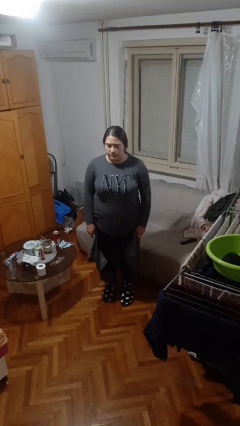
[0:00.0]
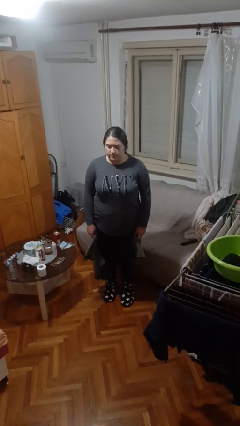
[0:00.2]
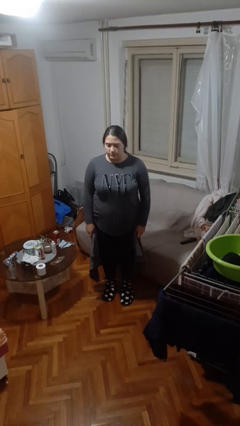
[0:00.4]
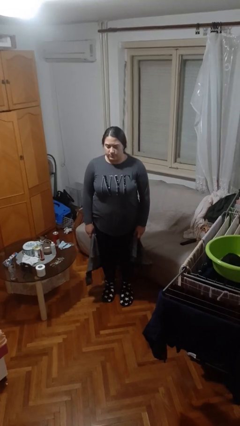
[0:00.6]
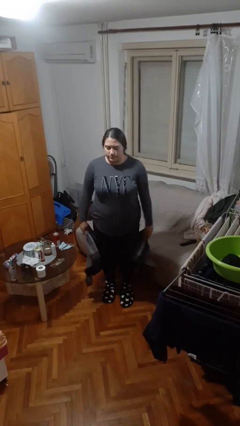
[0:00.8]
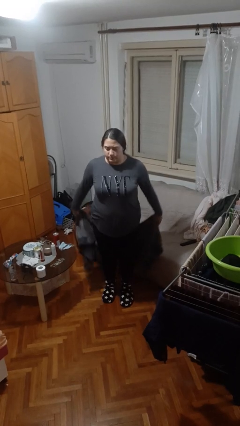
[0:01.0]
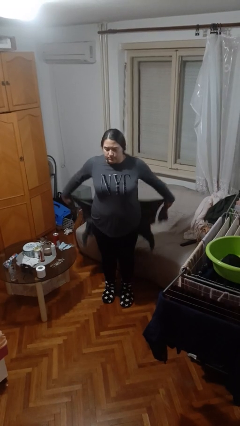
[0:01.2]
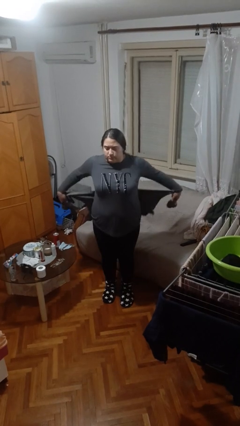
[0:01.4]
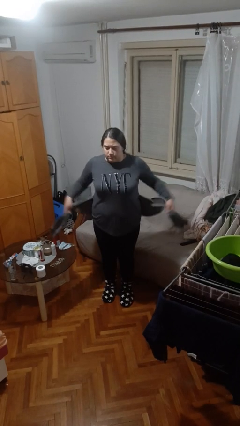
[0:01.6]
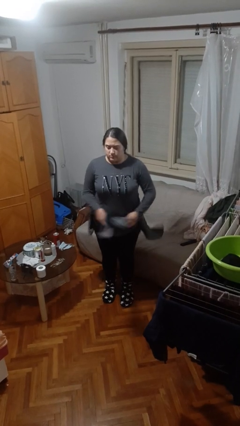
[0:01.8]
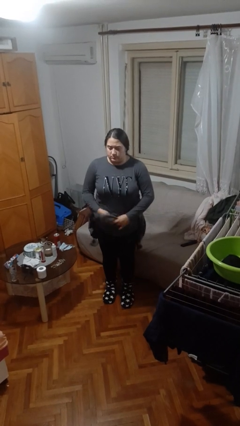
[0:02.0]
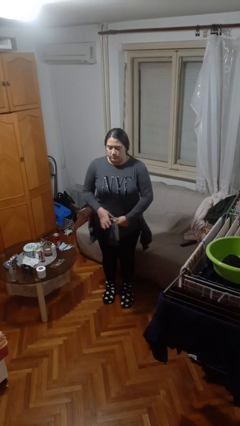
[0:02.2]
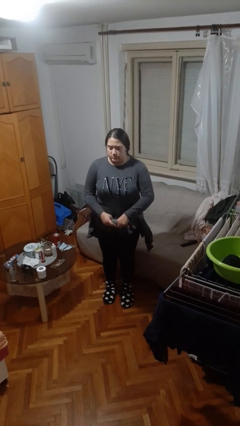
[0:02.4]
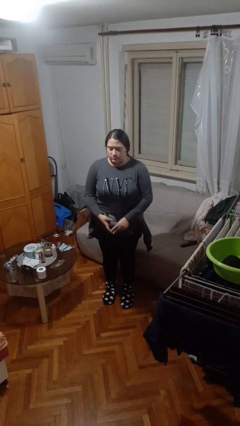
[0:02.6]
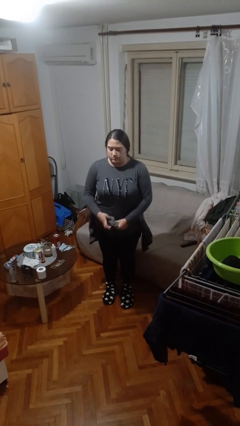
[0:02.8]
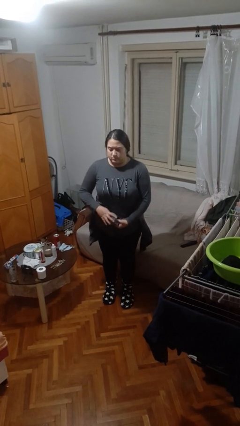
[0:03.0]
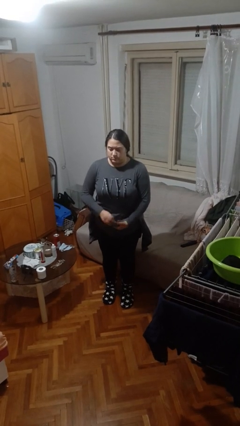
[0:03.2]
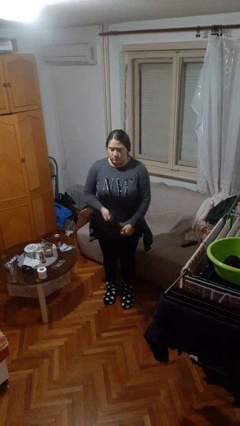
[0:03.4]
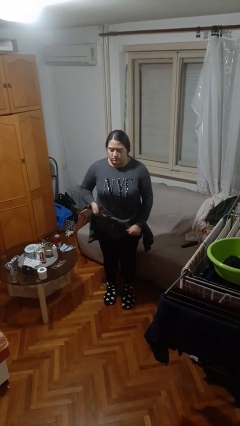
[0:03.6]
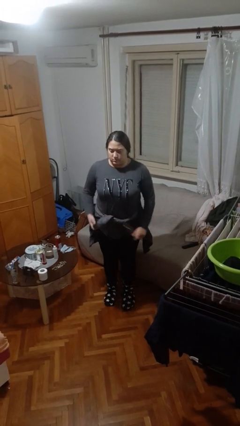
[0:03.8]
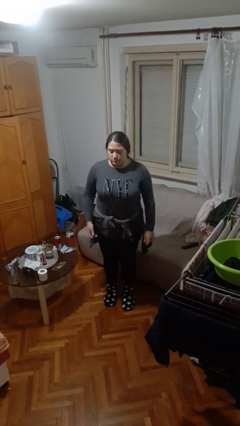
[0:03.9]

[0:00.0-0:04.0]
person ties jacket around waist

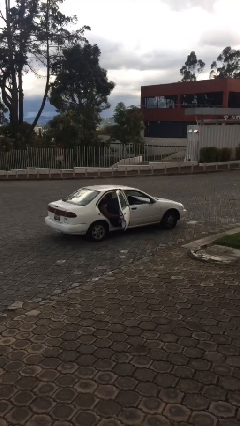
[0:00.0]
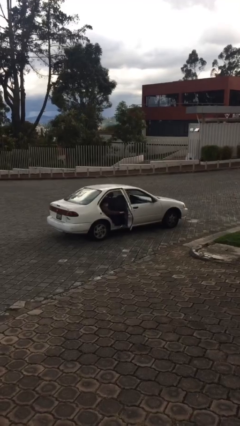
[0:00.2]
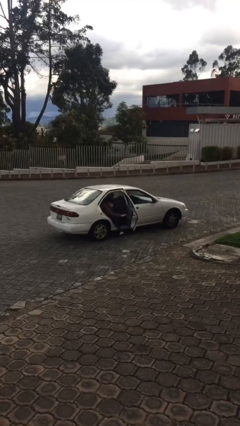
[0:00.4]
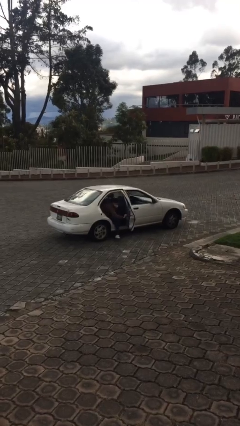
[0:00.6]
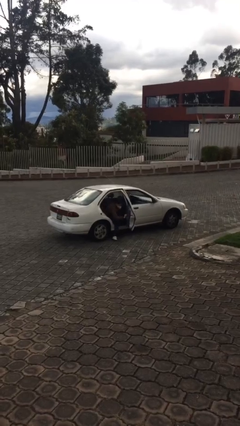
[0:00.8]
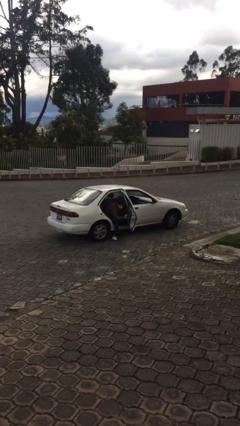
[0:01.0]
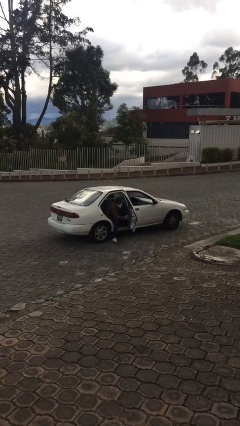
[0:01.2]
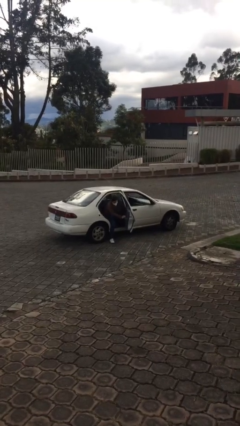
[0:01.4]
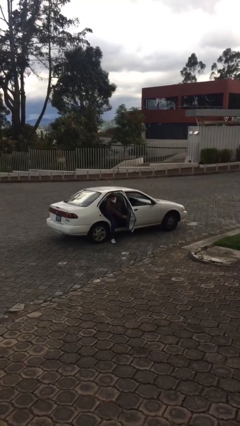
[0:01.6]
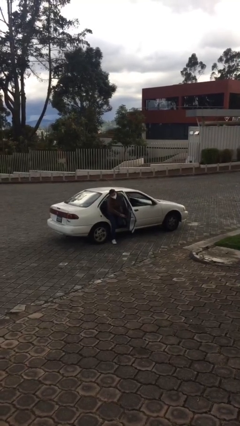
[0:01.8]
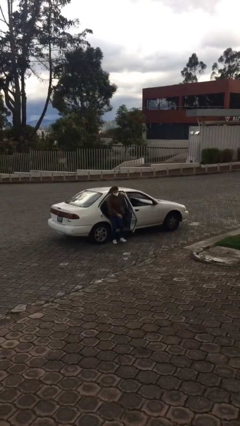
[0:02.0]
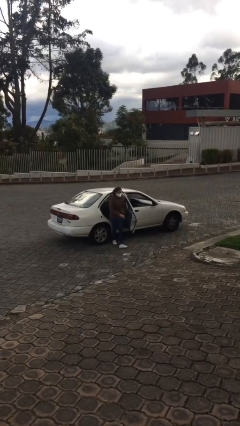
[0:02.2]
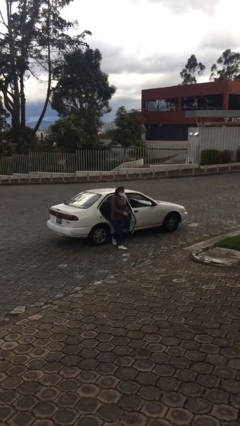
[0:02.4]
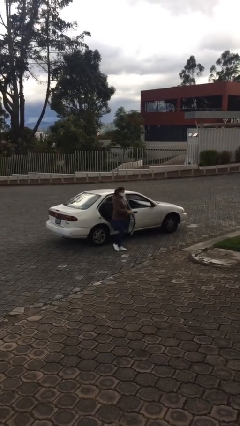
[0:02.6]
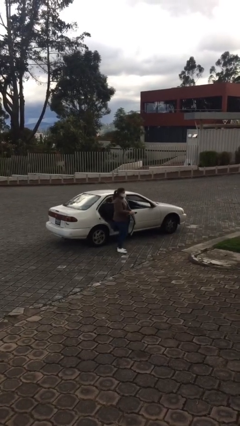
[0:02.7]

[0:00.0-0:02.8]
car drops off person

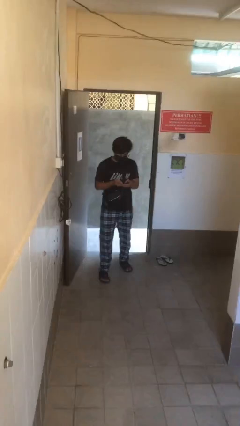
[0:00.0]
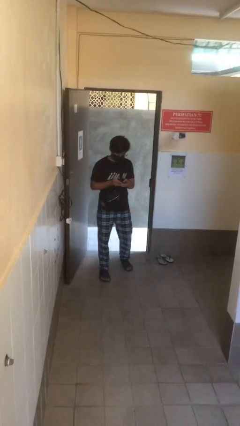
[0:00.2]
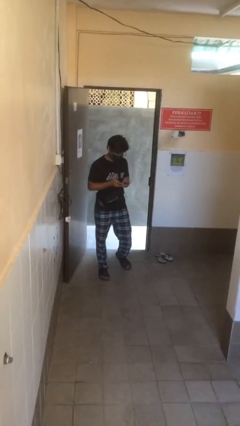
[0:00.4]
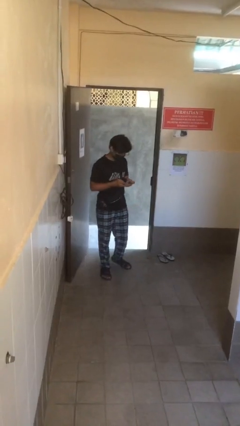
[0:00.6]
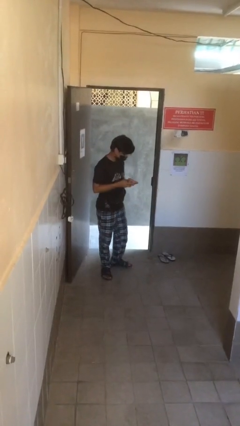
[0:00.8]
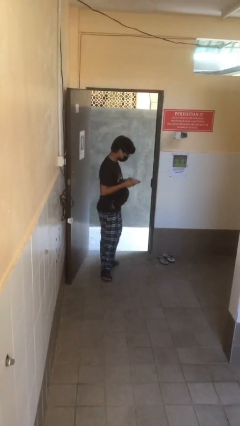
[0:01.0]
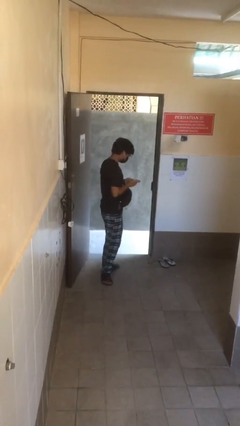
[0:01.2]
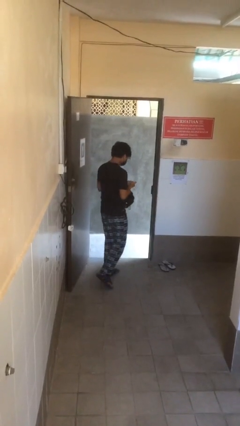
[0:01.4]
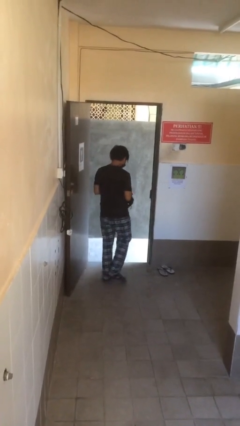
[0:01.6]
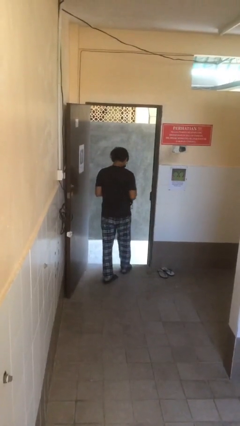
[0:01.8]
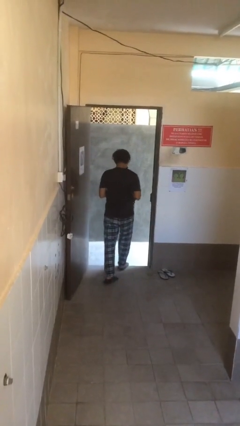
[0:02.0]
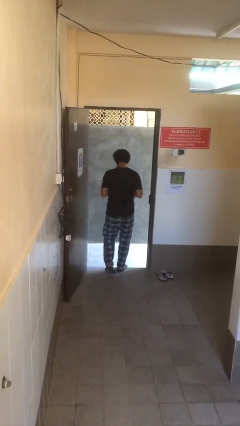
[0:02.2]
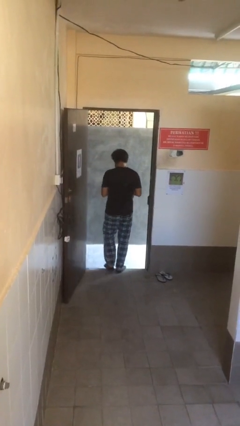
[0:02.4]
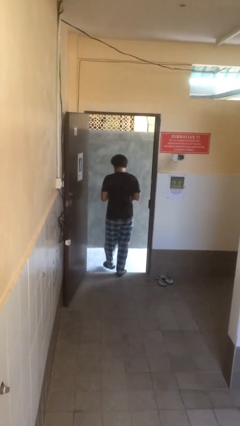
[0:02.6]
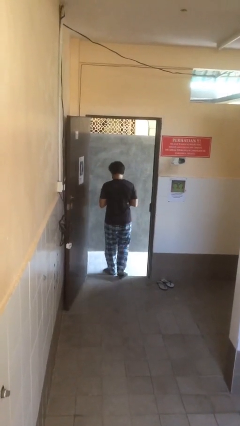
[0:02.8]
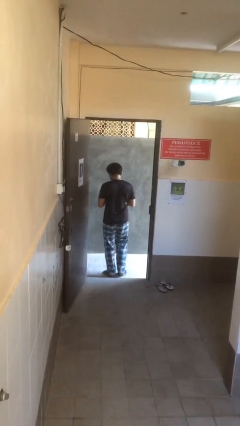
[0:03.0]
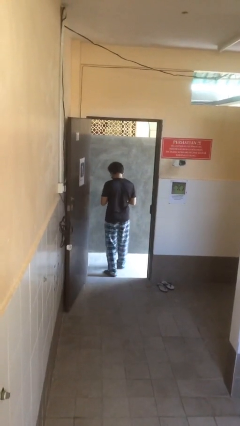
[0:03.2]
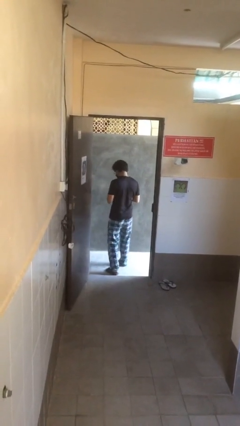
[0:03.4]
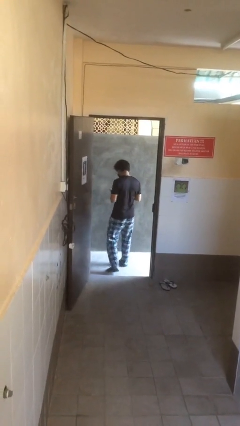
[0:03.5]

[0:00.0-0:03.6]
person exits scene through structure

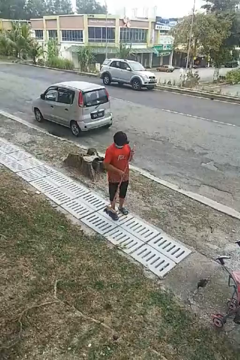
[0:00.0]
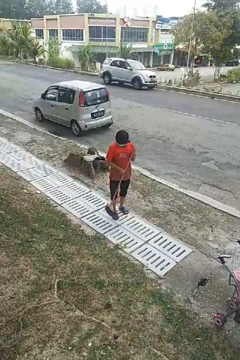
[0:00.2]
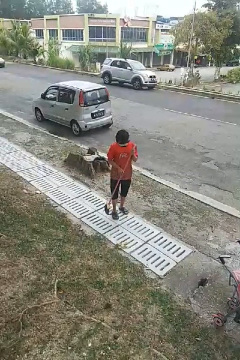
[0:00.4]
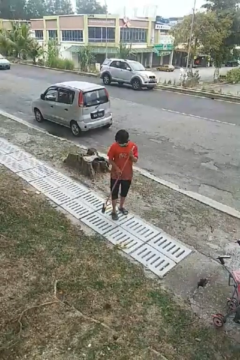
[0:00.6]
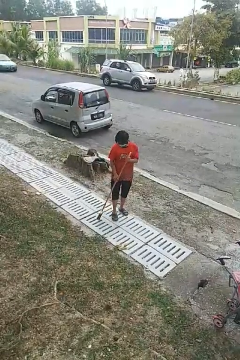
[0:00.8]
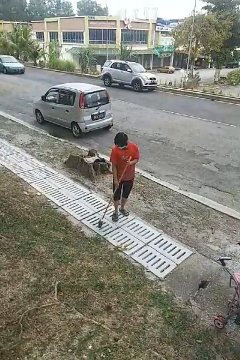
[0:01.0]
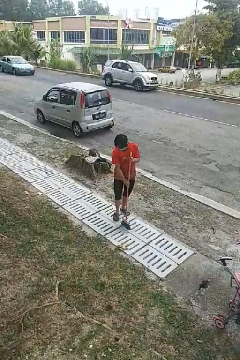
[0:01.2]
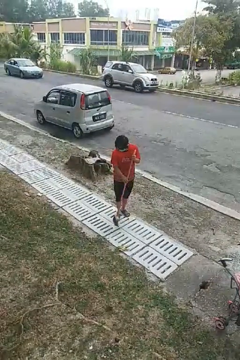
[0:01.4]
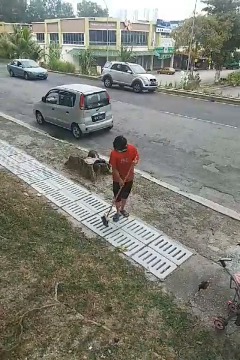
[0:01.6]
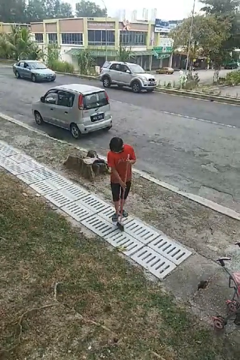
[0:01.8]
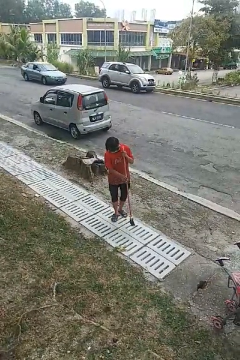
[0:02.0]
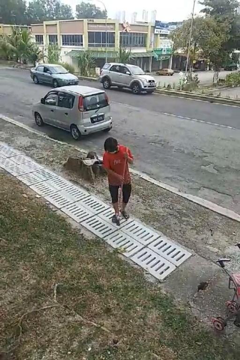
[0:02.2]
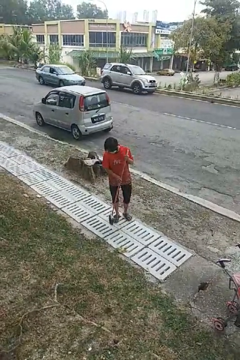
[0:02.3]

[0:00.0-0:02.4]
person sweeps floor

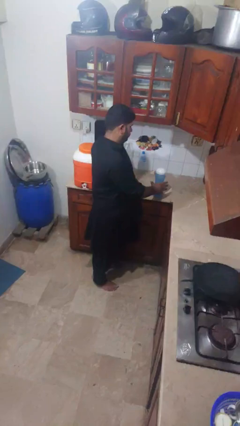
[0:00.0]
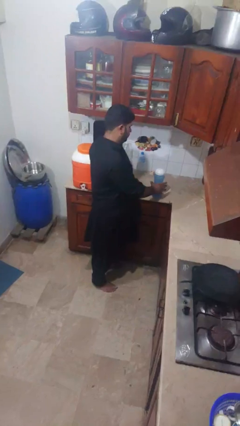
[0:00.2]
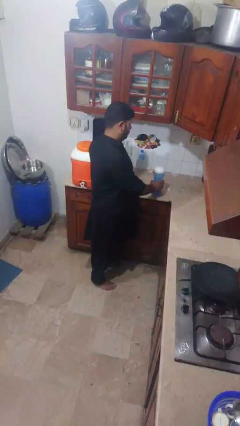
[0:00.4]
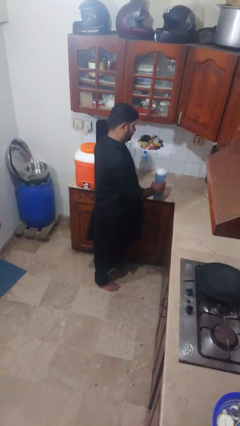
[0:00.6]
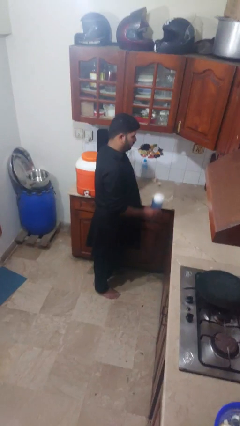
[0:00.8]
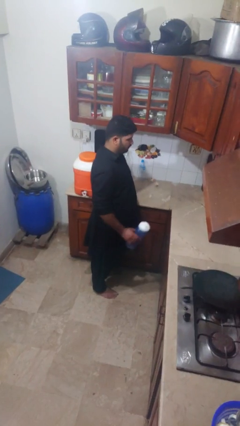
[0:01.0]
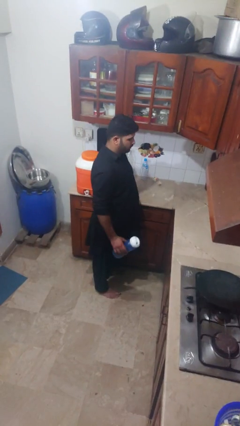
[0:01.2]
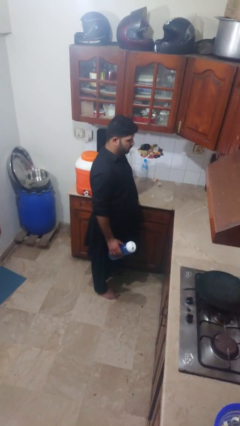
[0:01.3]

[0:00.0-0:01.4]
person picks up object from countertop

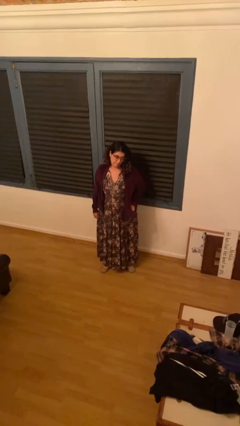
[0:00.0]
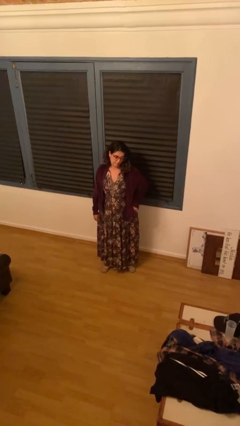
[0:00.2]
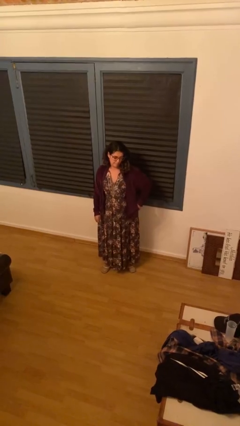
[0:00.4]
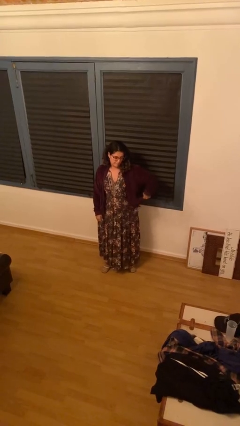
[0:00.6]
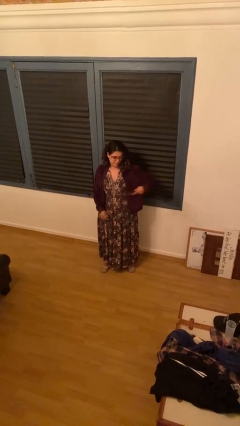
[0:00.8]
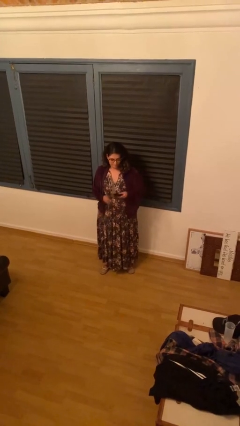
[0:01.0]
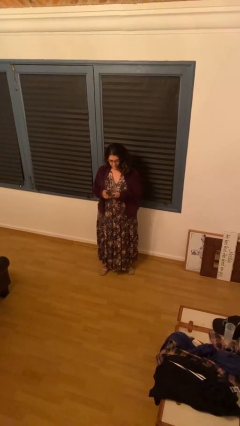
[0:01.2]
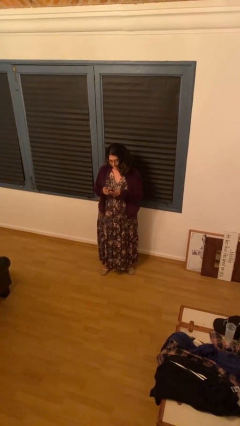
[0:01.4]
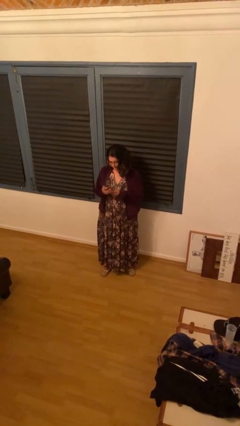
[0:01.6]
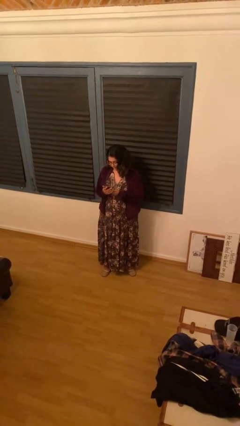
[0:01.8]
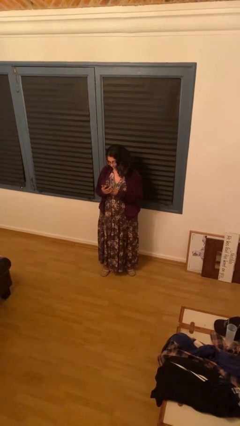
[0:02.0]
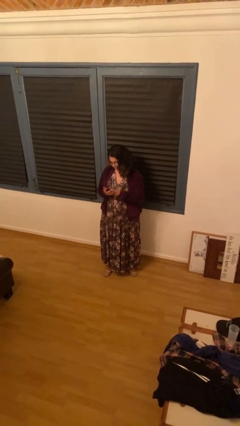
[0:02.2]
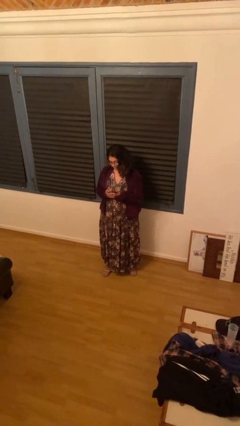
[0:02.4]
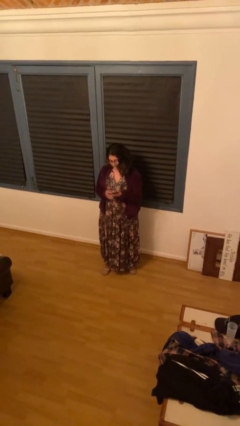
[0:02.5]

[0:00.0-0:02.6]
person takes phone from pocket

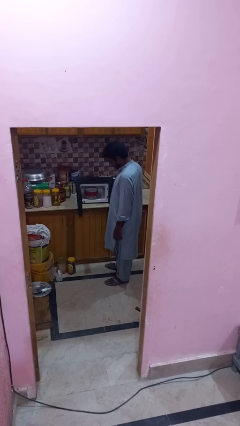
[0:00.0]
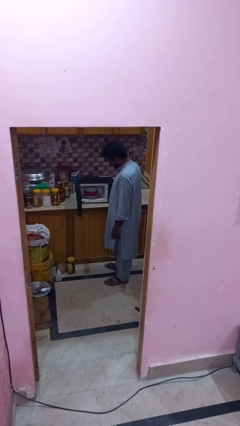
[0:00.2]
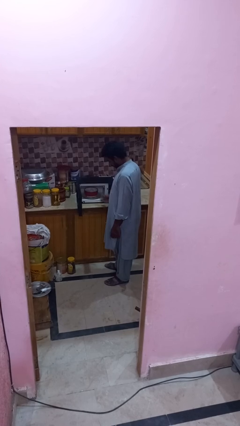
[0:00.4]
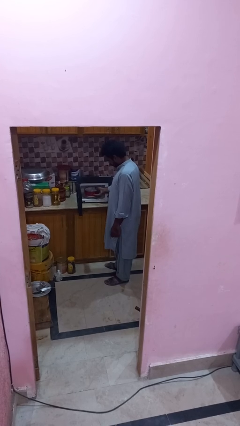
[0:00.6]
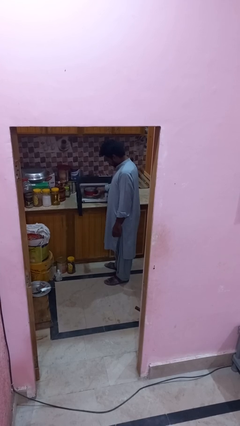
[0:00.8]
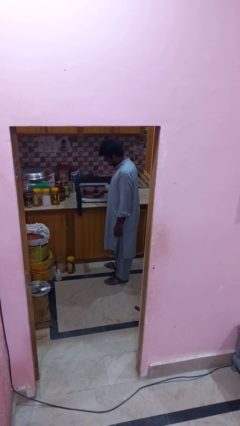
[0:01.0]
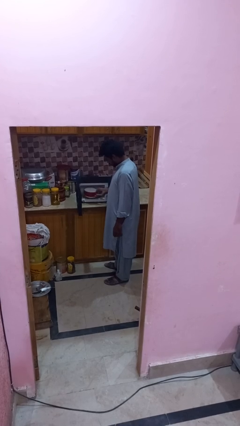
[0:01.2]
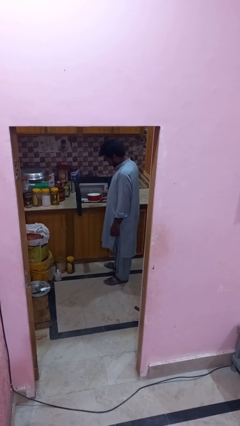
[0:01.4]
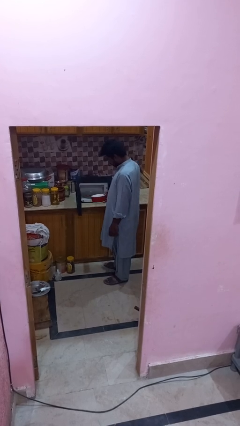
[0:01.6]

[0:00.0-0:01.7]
person takes object from microwave
